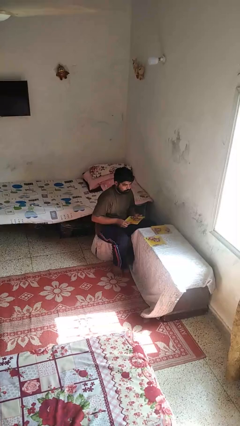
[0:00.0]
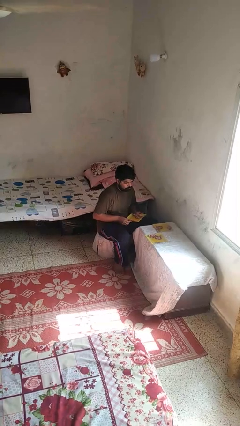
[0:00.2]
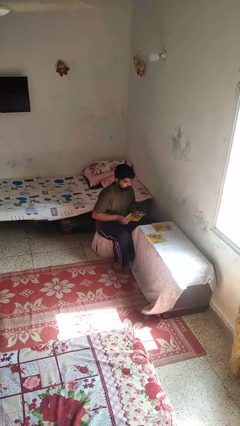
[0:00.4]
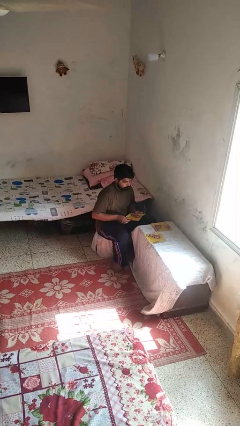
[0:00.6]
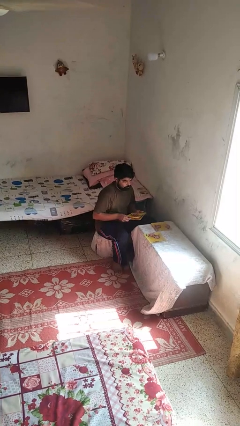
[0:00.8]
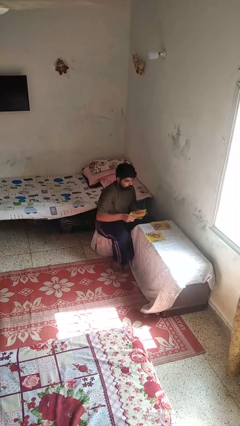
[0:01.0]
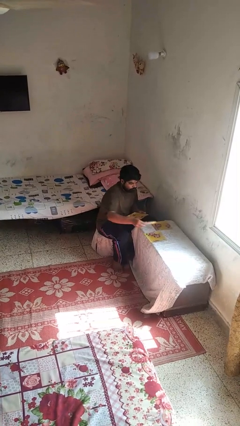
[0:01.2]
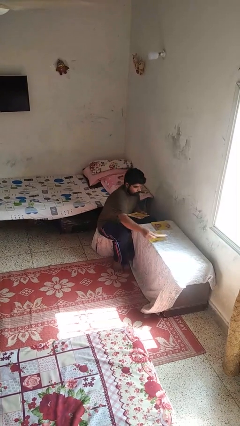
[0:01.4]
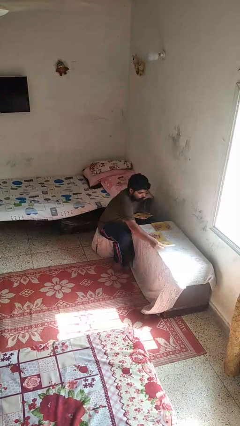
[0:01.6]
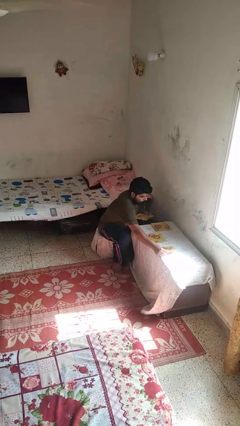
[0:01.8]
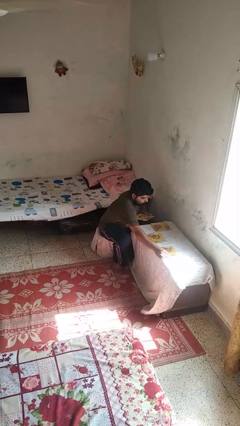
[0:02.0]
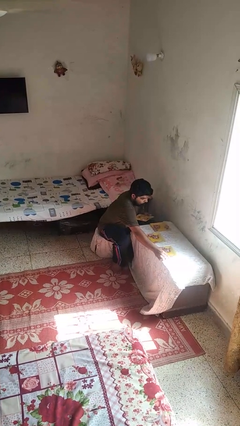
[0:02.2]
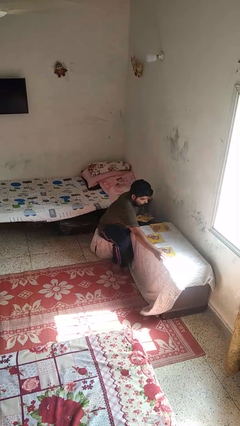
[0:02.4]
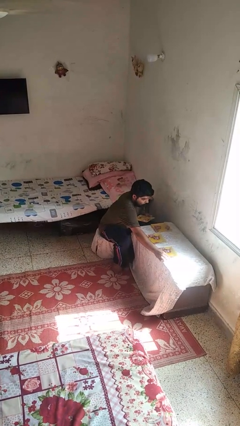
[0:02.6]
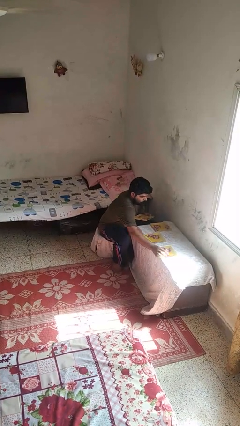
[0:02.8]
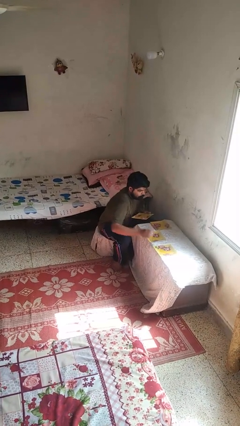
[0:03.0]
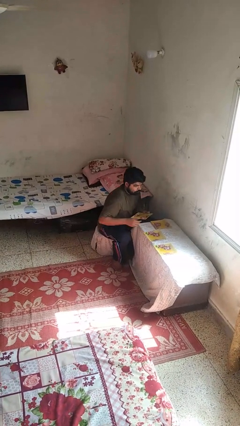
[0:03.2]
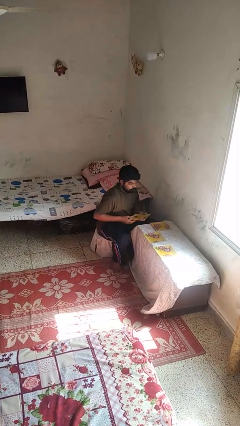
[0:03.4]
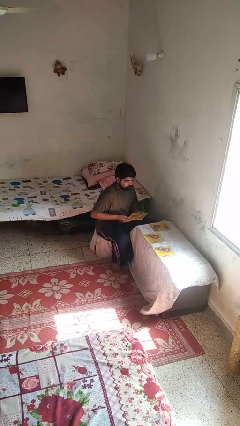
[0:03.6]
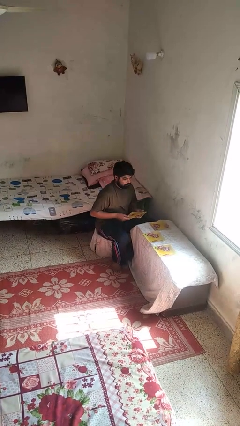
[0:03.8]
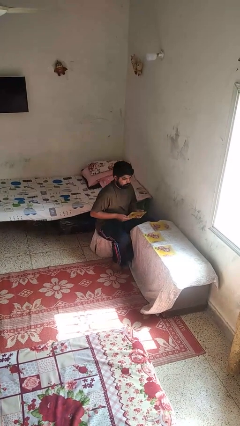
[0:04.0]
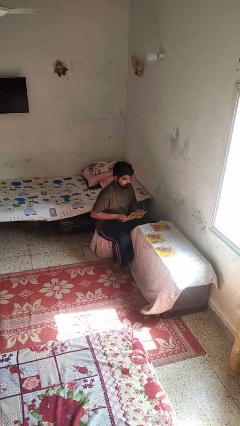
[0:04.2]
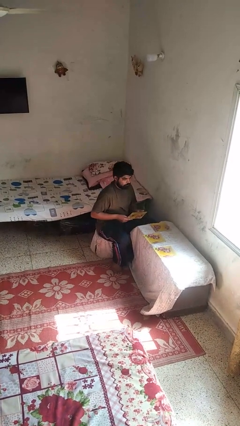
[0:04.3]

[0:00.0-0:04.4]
person sets table

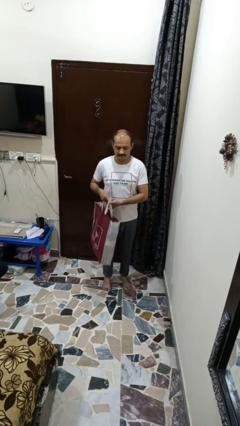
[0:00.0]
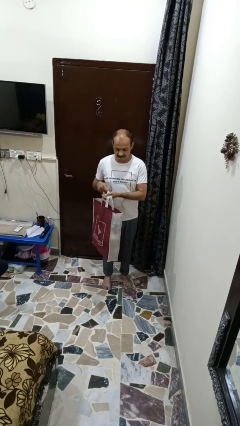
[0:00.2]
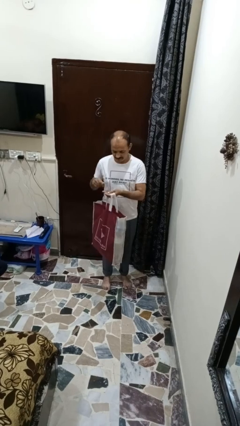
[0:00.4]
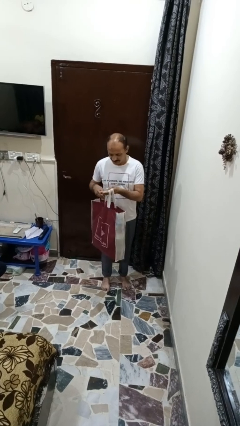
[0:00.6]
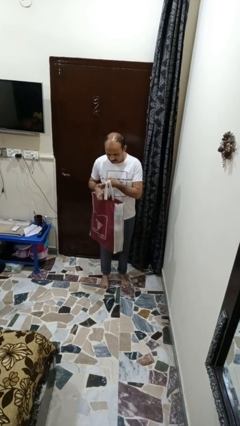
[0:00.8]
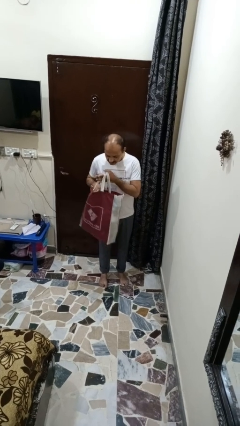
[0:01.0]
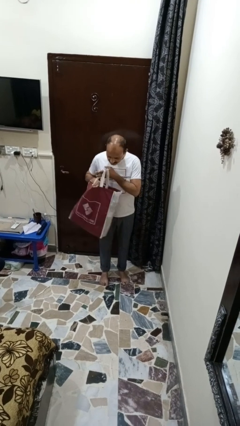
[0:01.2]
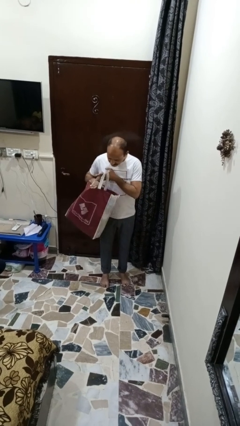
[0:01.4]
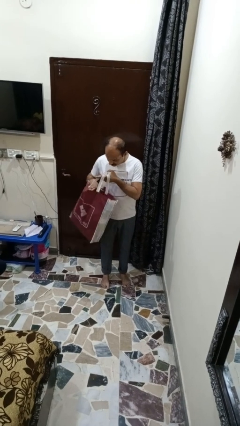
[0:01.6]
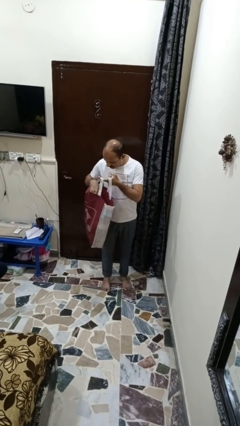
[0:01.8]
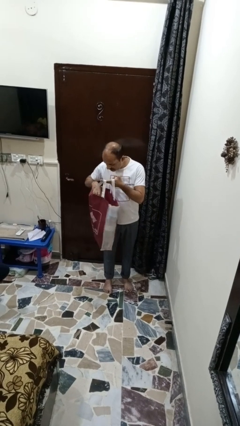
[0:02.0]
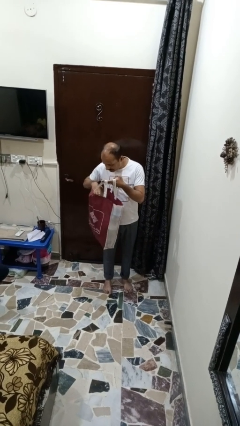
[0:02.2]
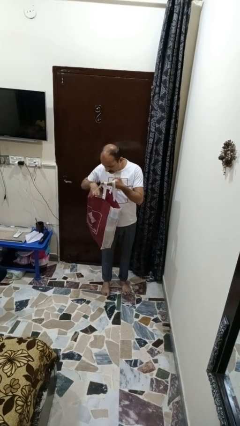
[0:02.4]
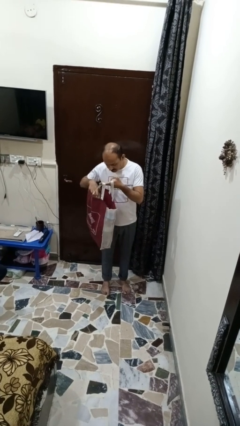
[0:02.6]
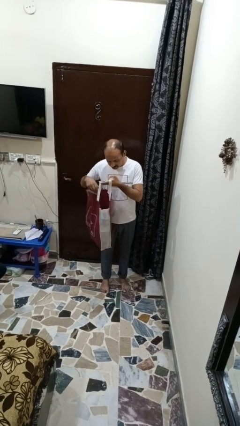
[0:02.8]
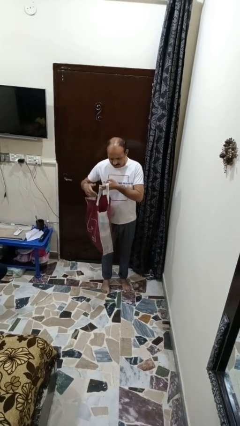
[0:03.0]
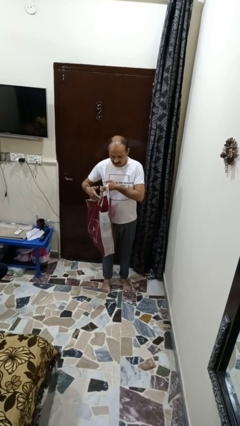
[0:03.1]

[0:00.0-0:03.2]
person searches in bag

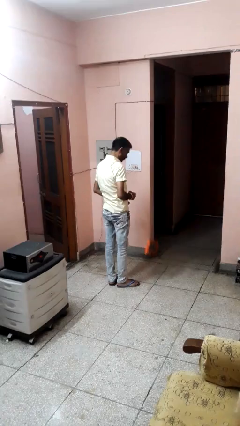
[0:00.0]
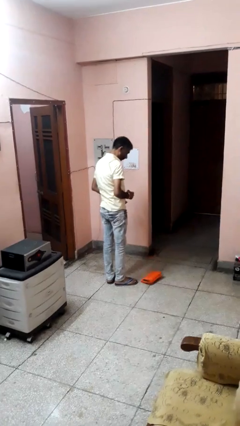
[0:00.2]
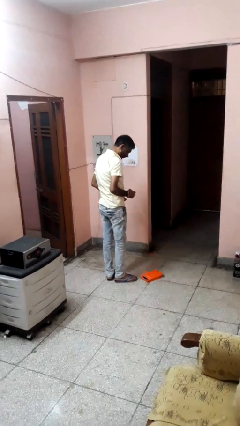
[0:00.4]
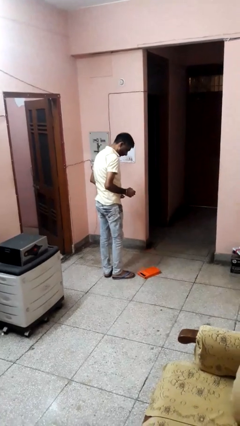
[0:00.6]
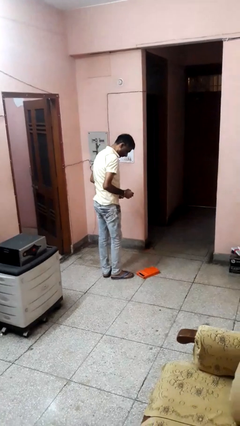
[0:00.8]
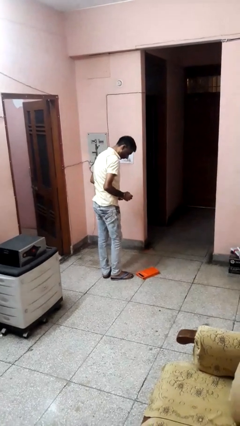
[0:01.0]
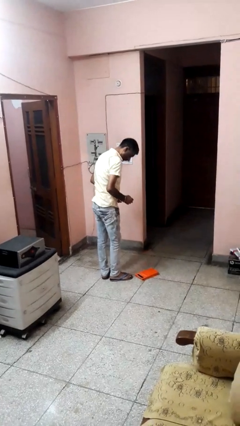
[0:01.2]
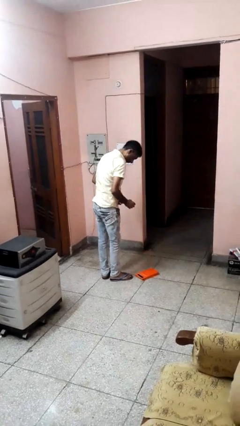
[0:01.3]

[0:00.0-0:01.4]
person drops object

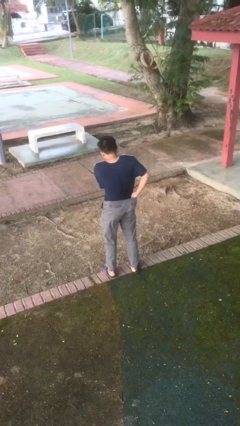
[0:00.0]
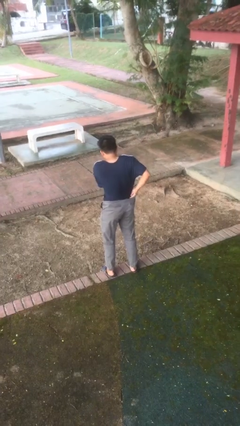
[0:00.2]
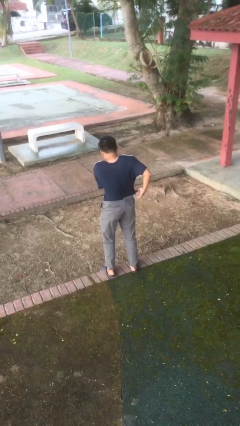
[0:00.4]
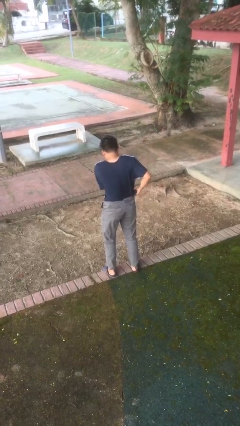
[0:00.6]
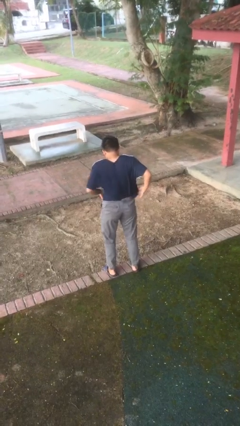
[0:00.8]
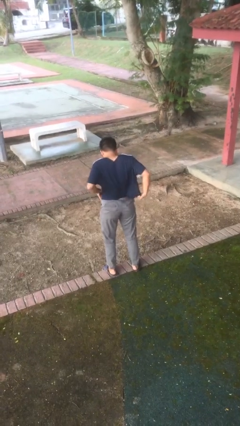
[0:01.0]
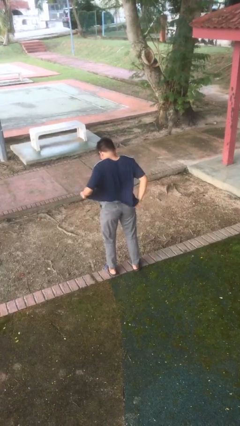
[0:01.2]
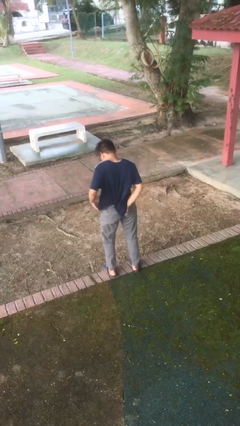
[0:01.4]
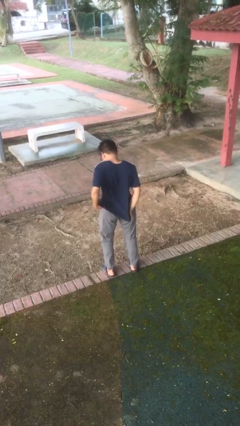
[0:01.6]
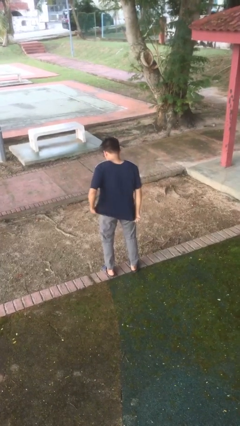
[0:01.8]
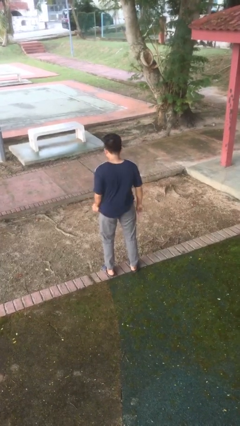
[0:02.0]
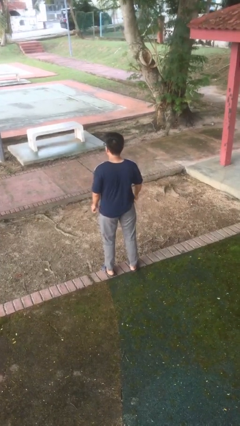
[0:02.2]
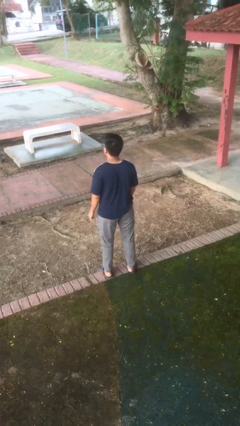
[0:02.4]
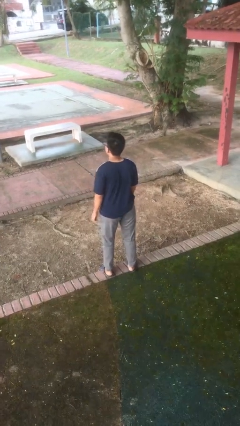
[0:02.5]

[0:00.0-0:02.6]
person untucks shirt

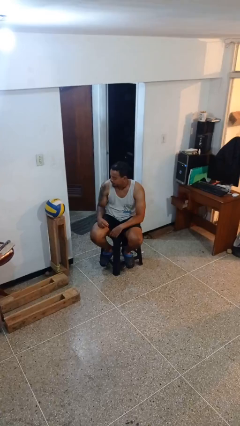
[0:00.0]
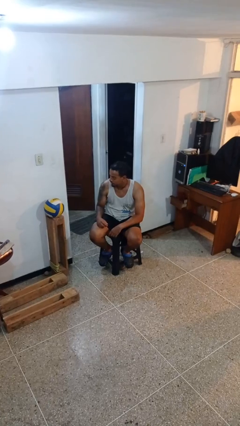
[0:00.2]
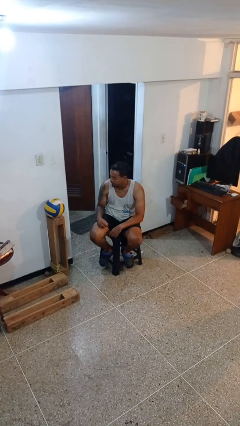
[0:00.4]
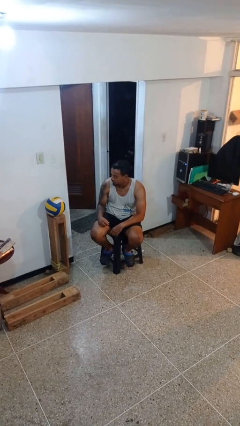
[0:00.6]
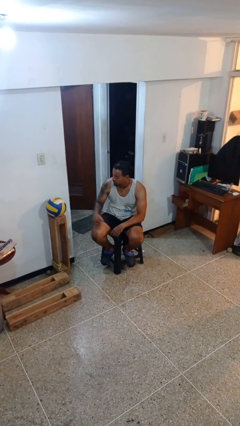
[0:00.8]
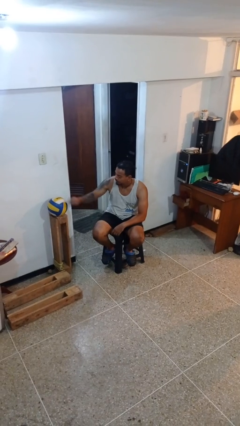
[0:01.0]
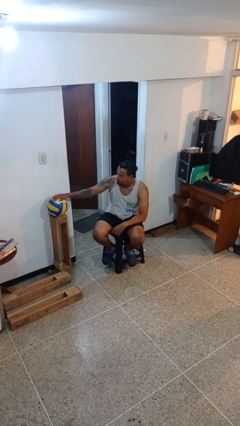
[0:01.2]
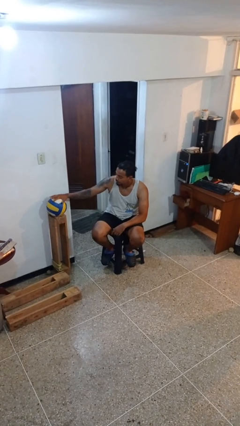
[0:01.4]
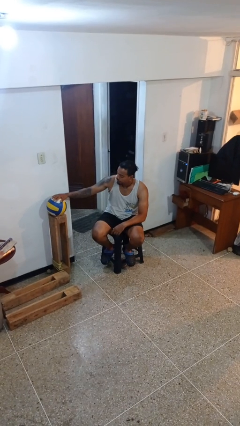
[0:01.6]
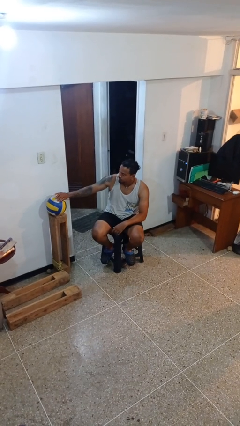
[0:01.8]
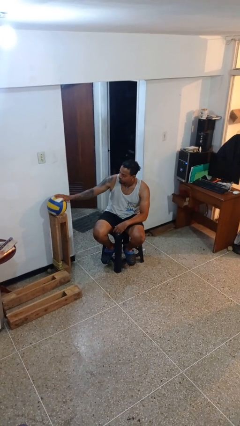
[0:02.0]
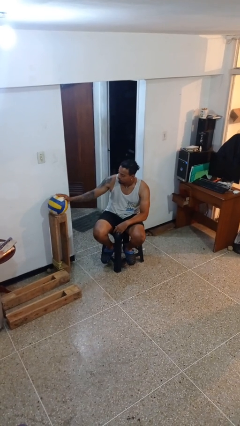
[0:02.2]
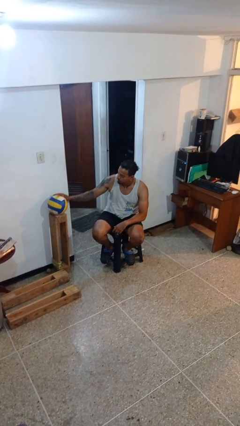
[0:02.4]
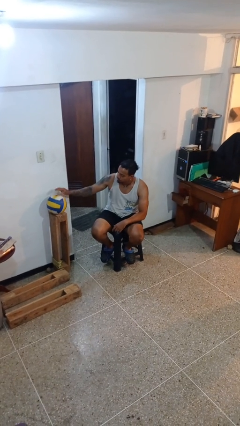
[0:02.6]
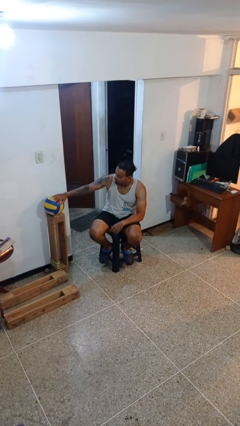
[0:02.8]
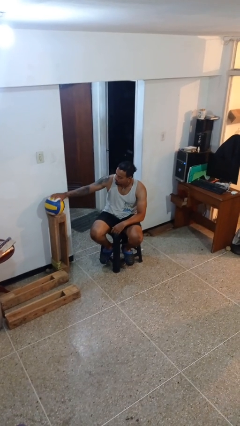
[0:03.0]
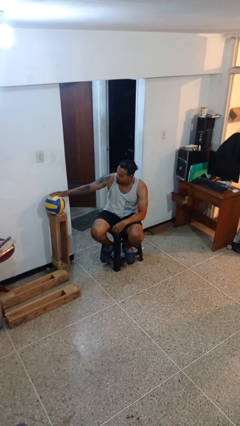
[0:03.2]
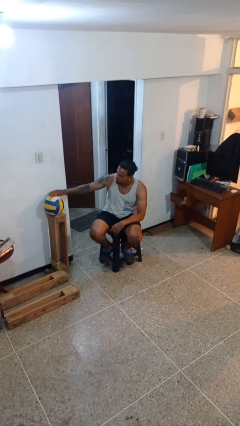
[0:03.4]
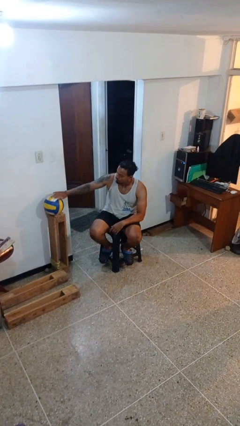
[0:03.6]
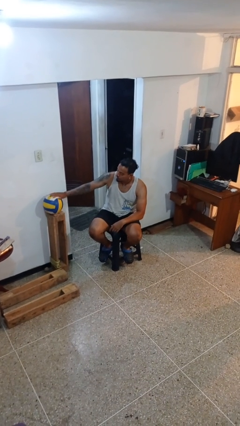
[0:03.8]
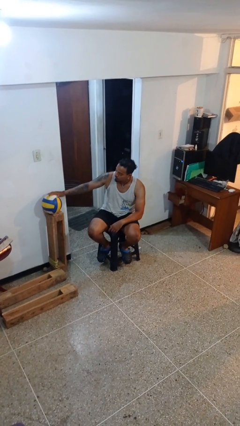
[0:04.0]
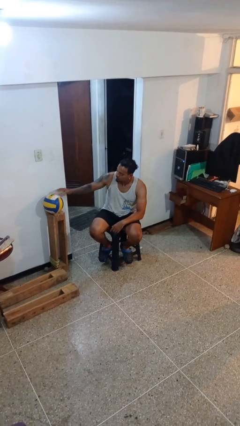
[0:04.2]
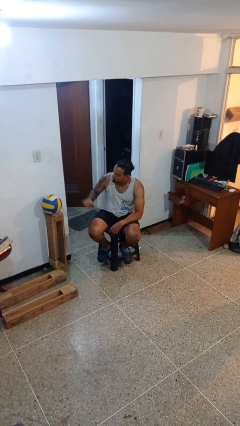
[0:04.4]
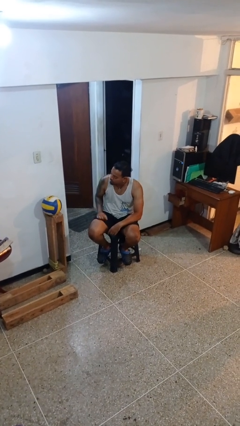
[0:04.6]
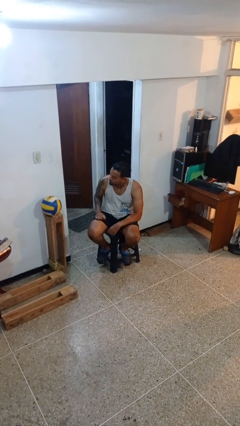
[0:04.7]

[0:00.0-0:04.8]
person waves hand over object

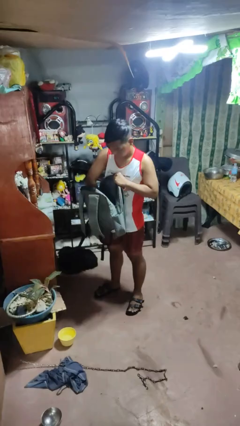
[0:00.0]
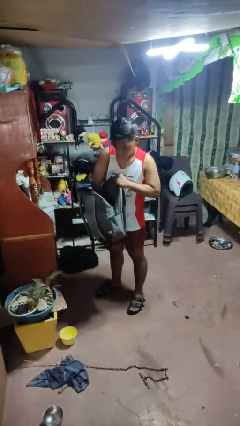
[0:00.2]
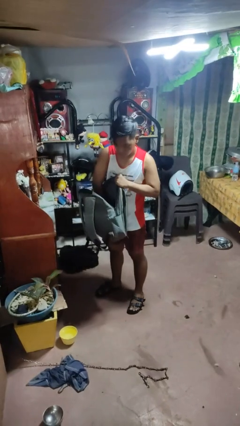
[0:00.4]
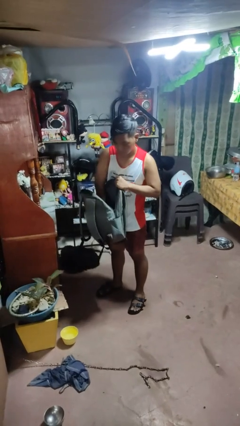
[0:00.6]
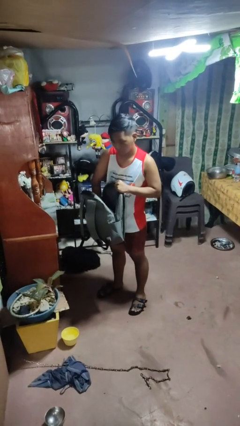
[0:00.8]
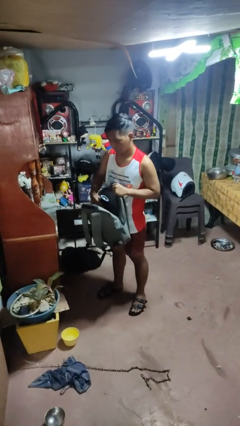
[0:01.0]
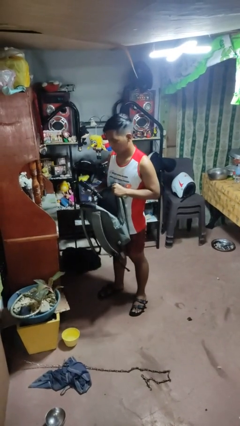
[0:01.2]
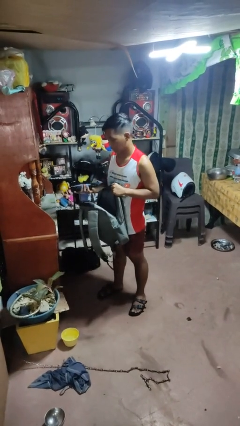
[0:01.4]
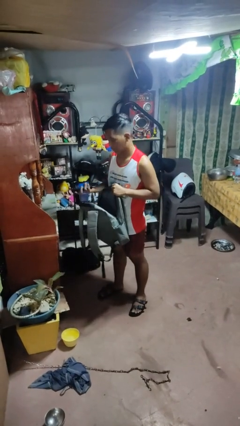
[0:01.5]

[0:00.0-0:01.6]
person takes object from bag
